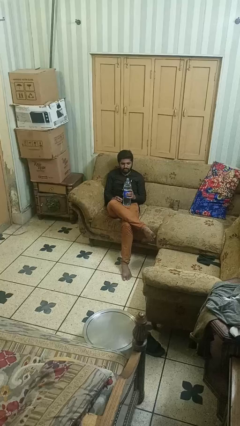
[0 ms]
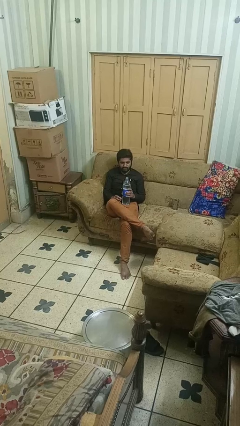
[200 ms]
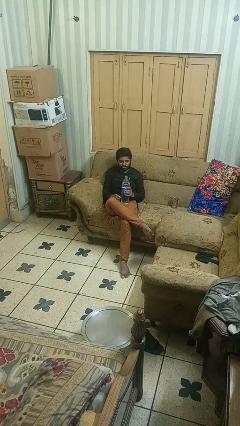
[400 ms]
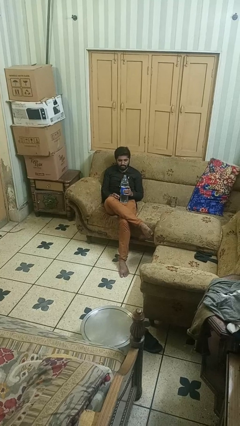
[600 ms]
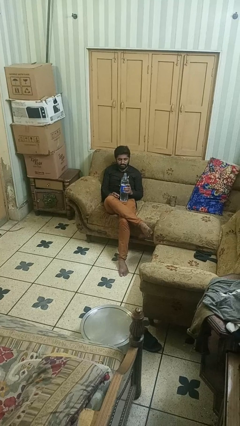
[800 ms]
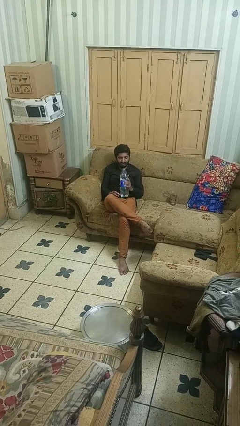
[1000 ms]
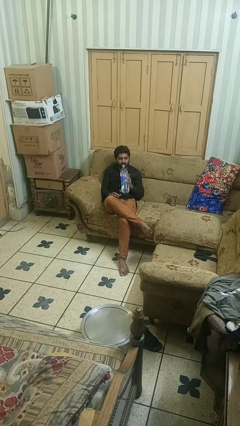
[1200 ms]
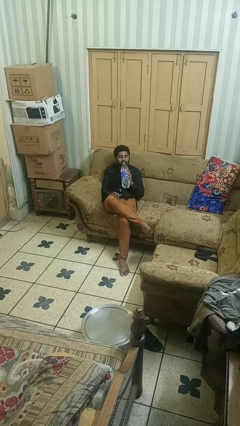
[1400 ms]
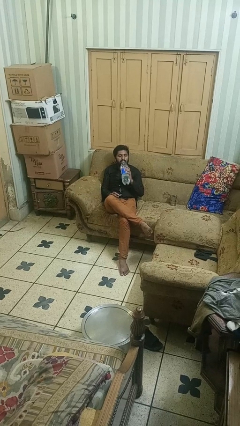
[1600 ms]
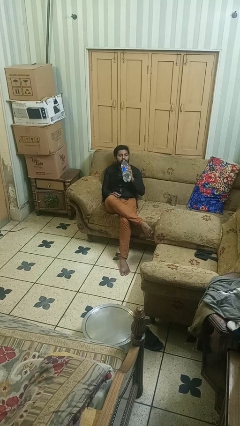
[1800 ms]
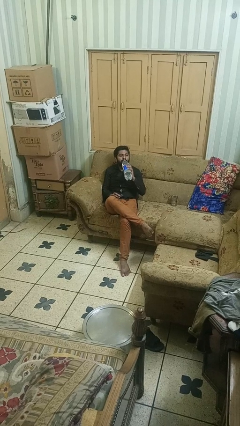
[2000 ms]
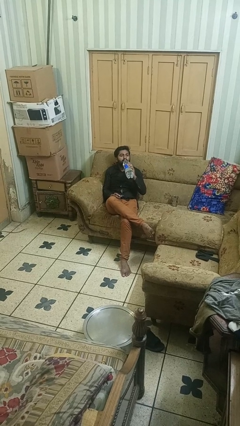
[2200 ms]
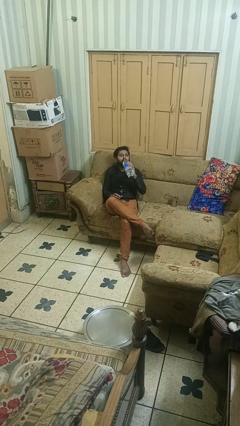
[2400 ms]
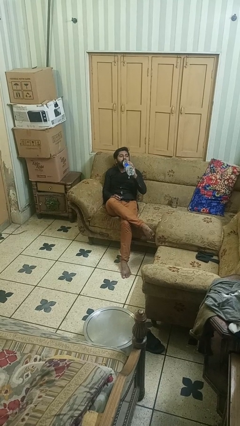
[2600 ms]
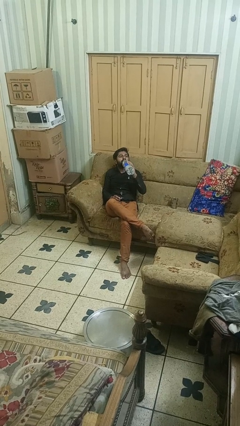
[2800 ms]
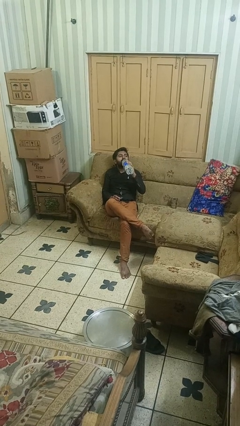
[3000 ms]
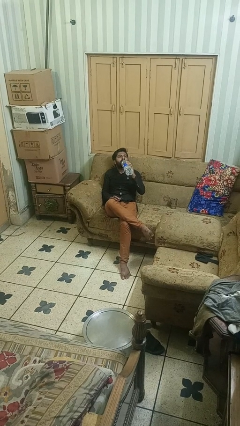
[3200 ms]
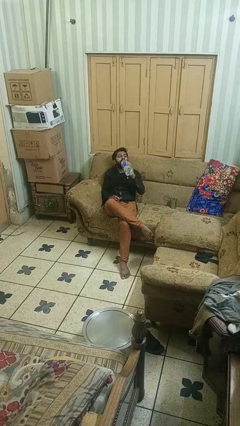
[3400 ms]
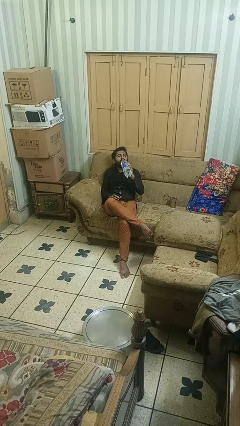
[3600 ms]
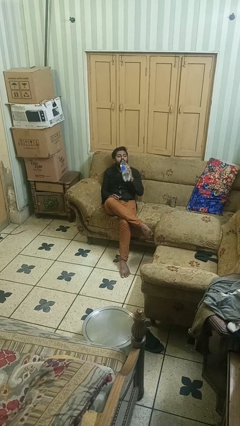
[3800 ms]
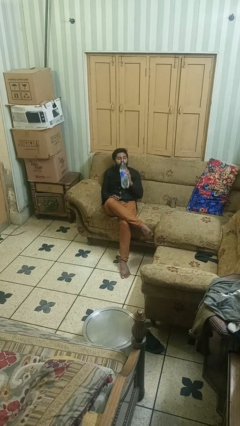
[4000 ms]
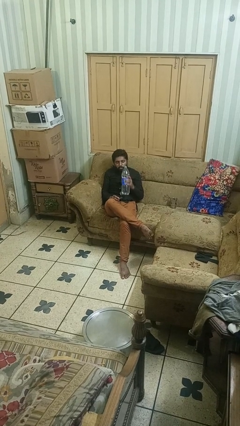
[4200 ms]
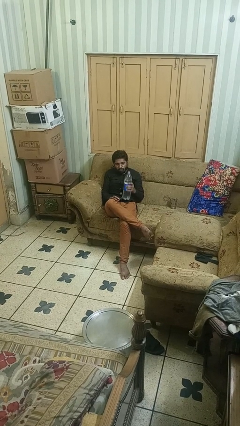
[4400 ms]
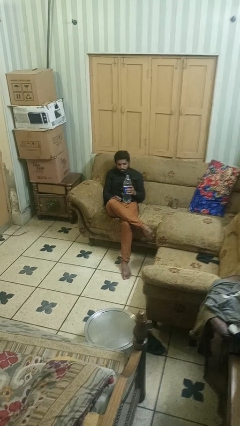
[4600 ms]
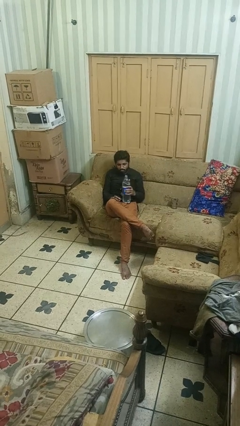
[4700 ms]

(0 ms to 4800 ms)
person drinks from bottle

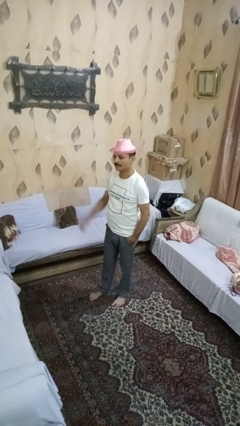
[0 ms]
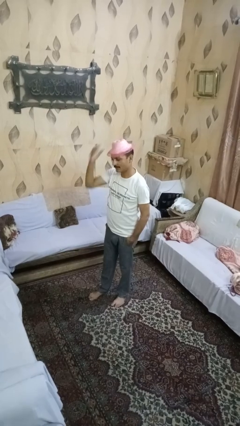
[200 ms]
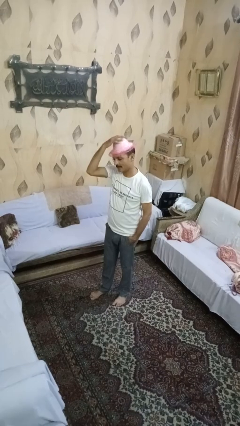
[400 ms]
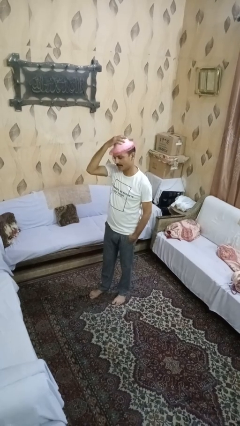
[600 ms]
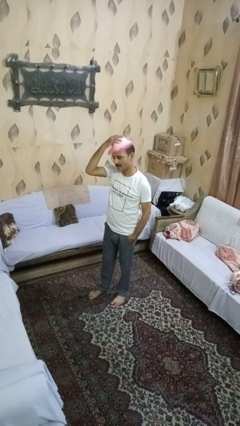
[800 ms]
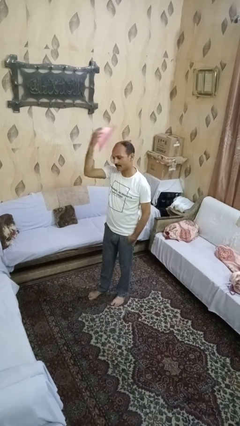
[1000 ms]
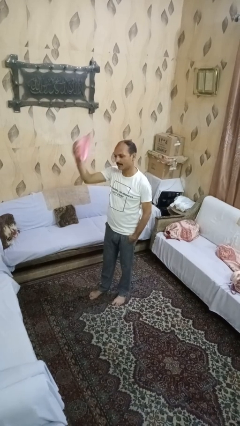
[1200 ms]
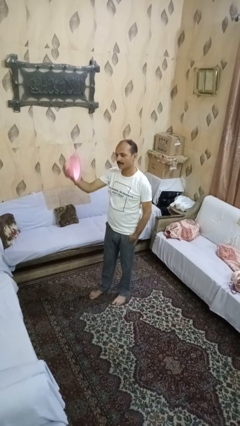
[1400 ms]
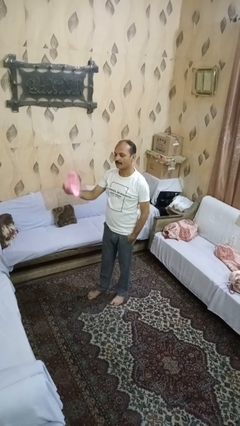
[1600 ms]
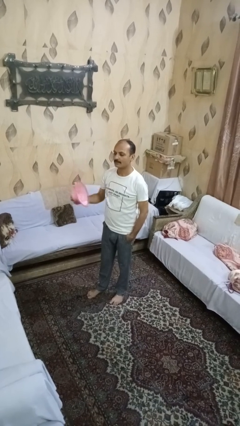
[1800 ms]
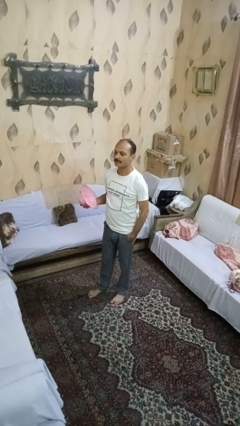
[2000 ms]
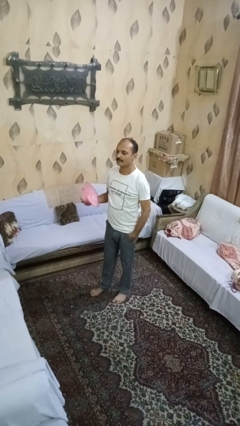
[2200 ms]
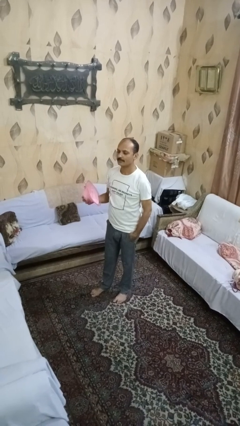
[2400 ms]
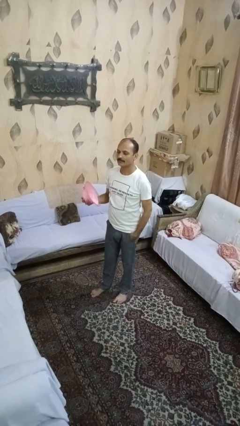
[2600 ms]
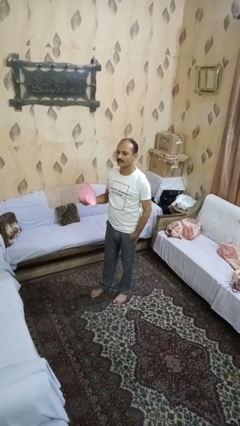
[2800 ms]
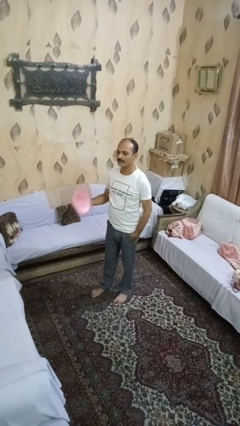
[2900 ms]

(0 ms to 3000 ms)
person takes off hat

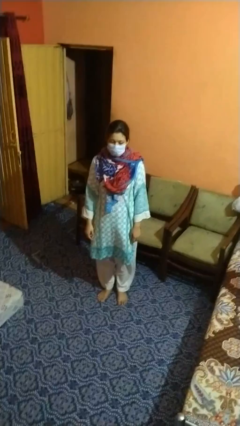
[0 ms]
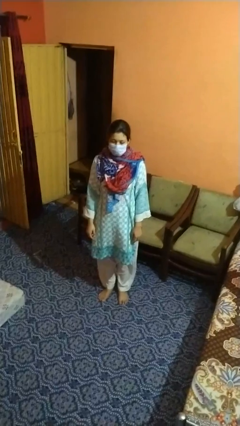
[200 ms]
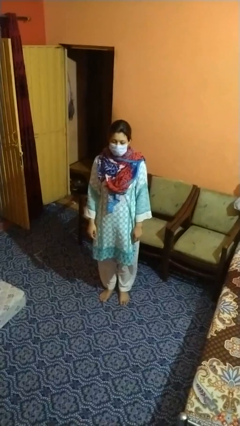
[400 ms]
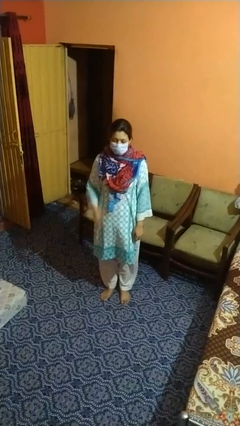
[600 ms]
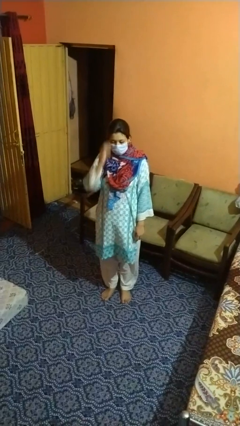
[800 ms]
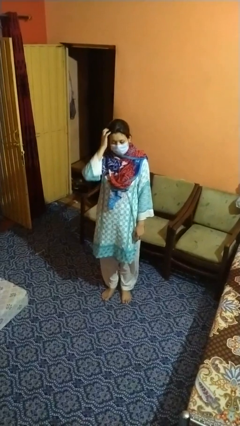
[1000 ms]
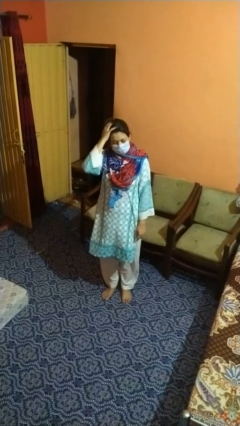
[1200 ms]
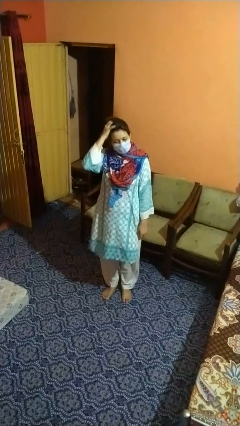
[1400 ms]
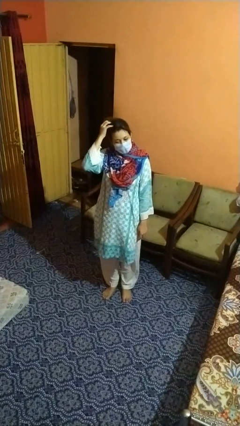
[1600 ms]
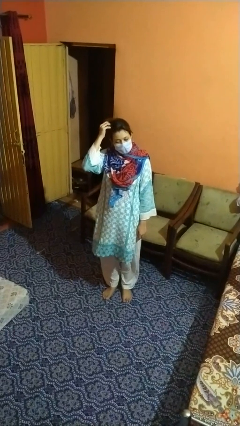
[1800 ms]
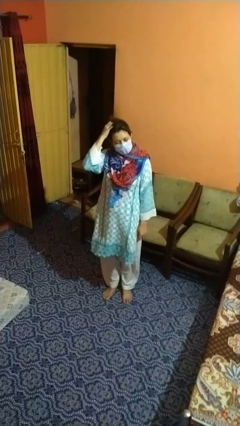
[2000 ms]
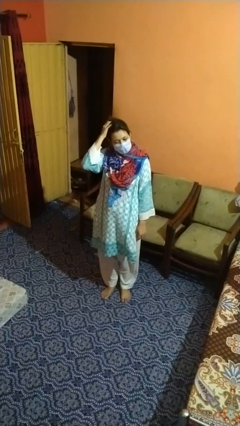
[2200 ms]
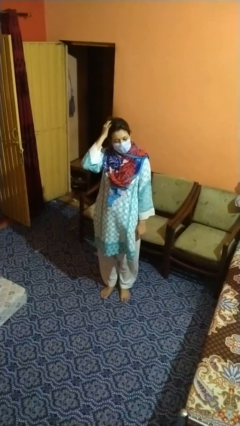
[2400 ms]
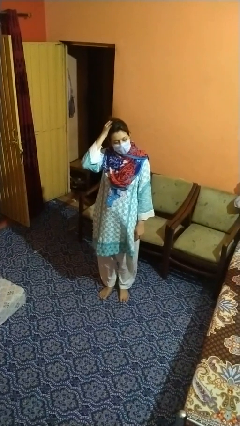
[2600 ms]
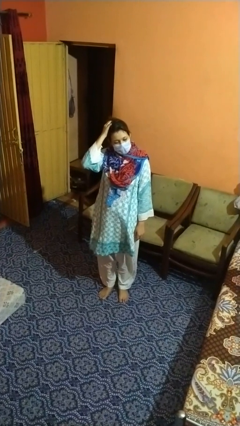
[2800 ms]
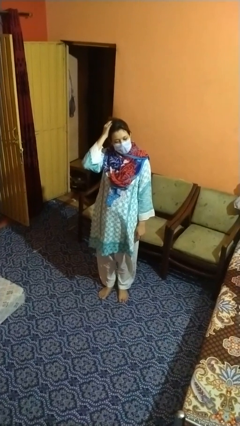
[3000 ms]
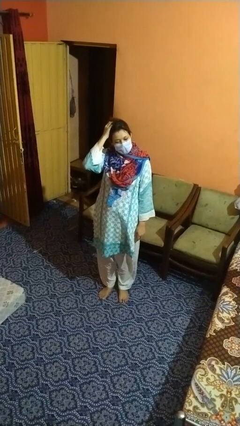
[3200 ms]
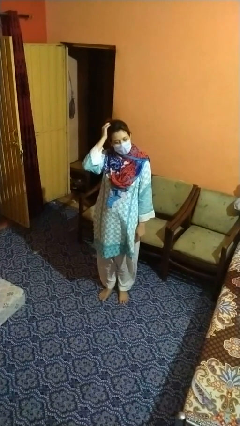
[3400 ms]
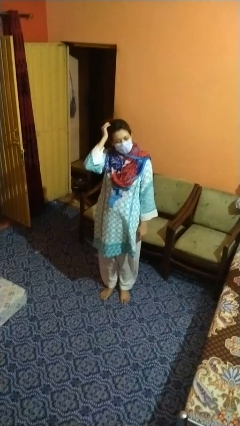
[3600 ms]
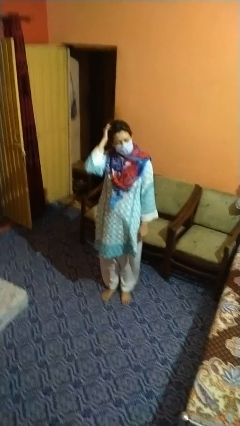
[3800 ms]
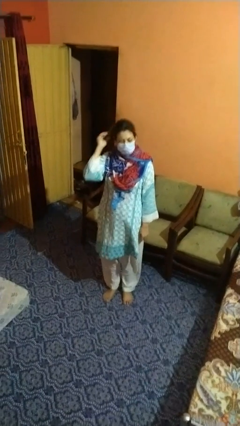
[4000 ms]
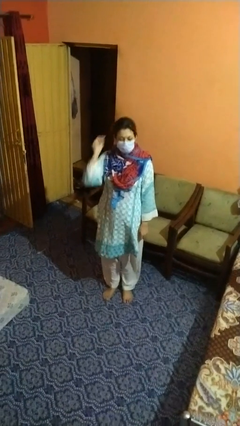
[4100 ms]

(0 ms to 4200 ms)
person strokes hair

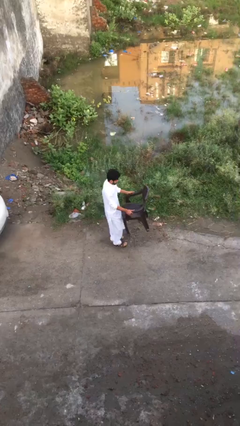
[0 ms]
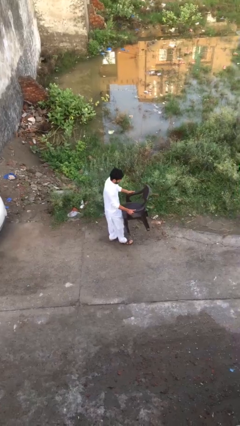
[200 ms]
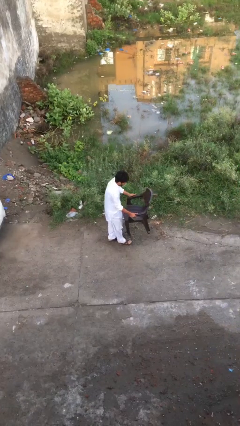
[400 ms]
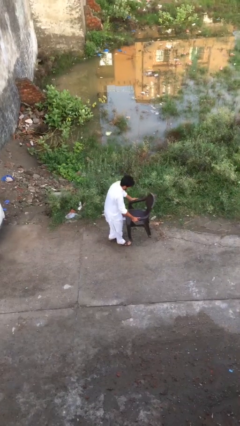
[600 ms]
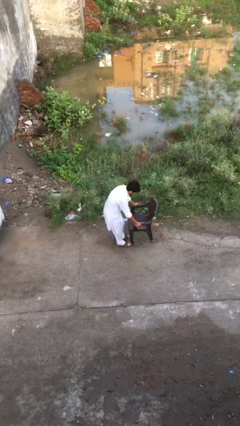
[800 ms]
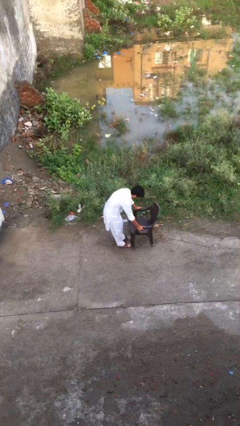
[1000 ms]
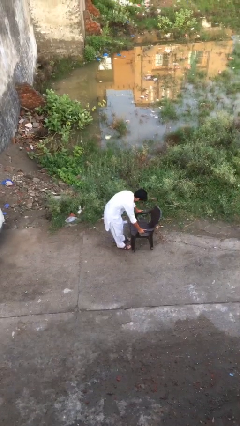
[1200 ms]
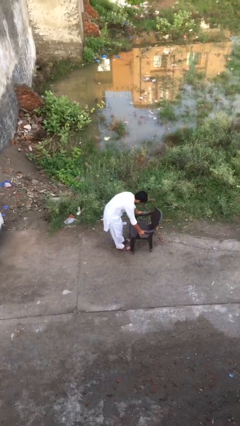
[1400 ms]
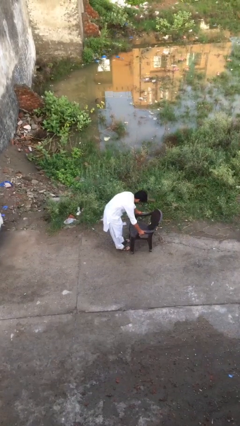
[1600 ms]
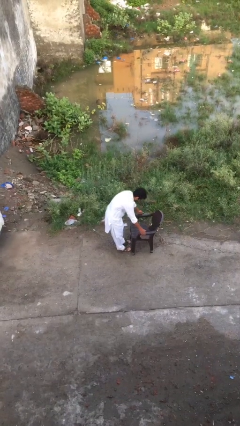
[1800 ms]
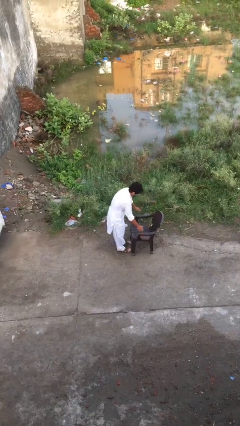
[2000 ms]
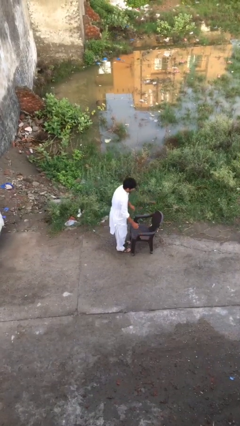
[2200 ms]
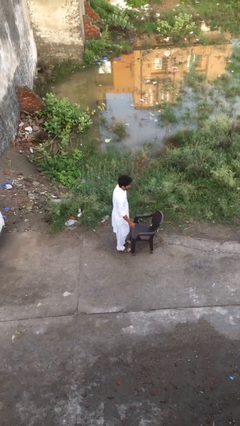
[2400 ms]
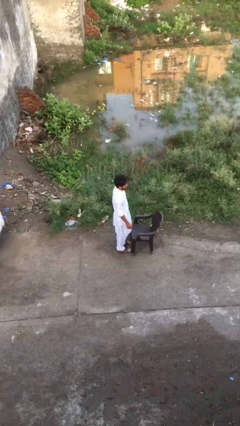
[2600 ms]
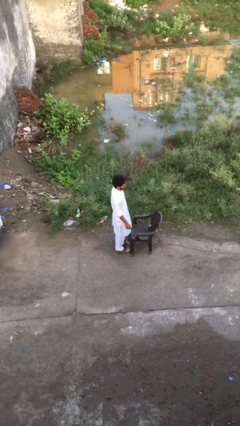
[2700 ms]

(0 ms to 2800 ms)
person puts down object on floor

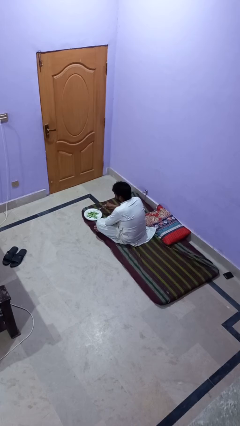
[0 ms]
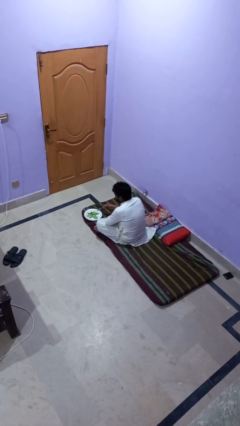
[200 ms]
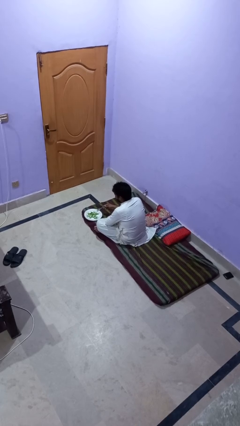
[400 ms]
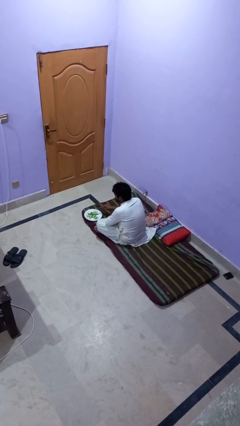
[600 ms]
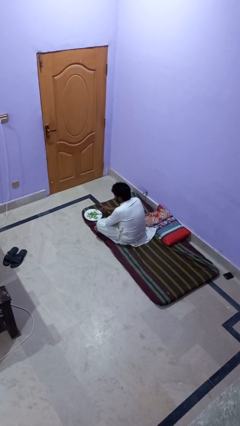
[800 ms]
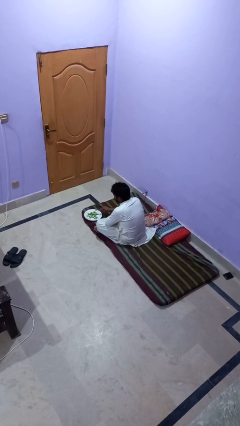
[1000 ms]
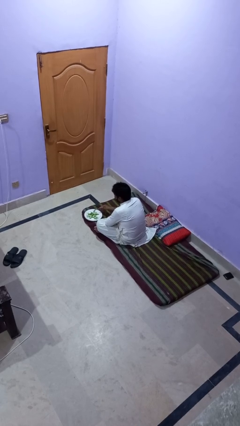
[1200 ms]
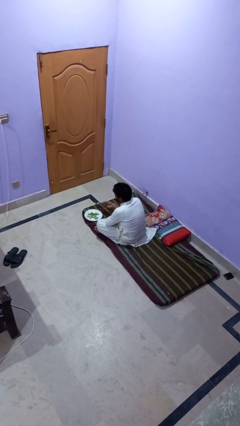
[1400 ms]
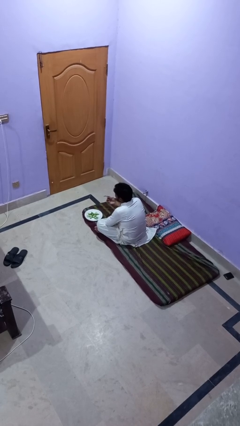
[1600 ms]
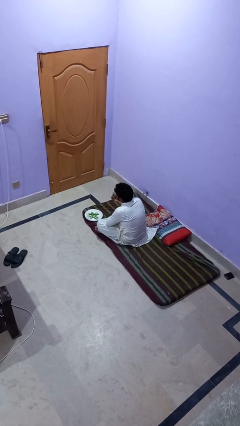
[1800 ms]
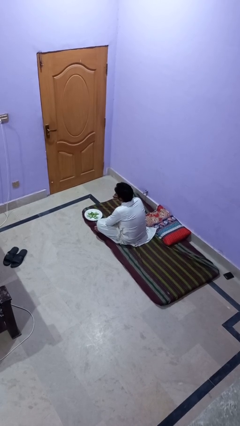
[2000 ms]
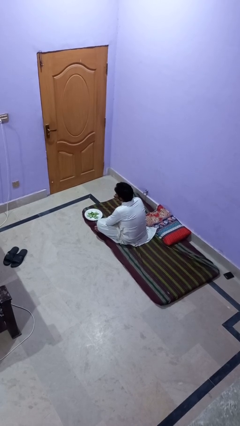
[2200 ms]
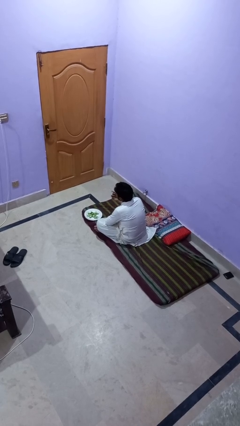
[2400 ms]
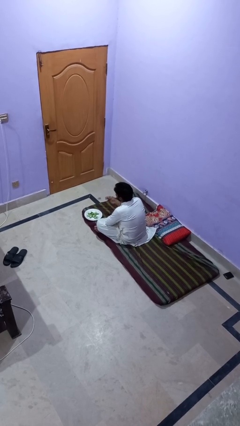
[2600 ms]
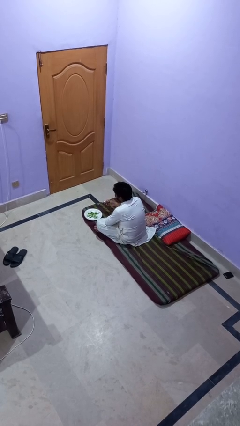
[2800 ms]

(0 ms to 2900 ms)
person eats with utensil
